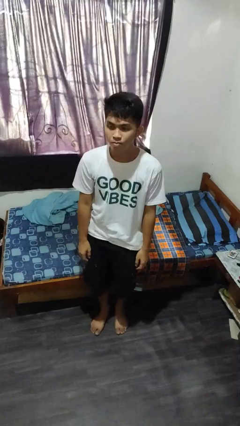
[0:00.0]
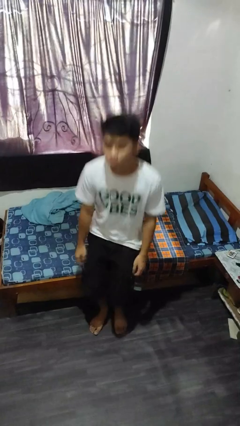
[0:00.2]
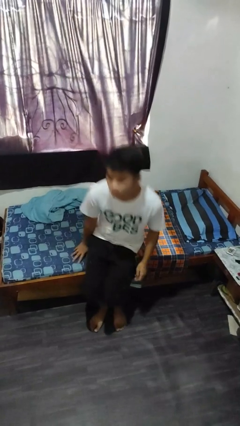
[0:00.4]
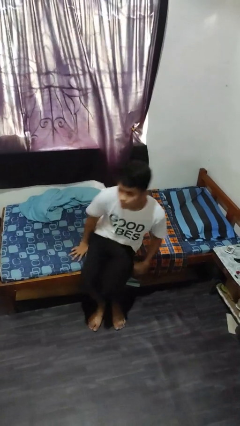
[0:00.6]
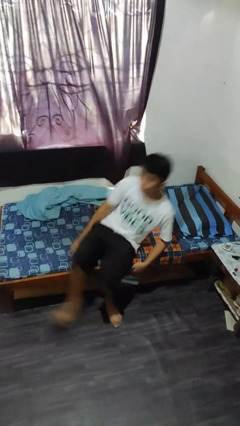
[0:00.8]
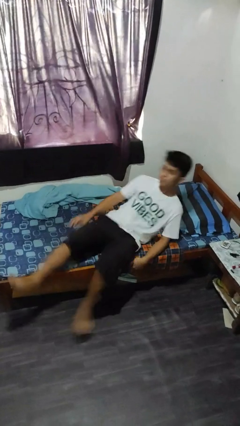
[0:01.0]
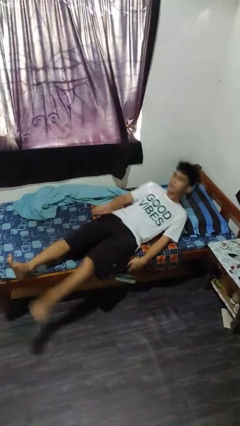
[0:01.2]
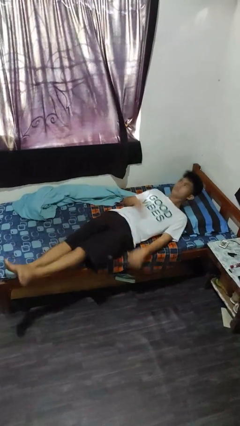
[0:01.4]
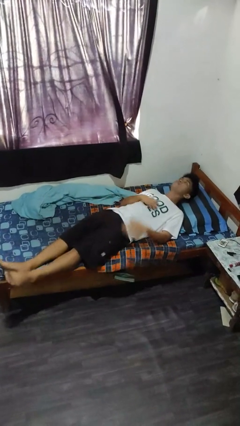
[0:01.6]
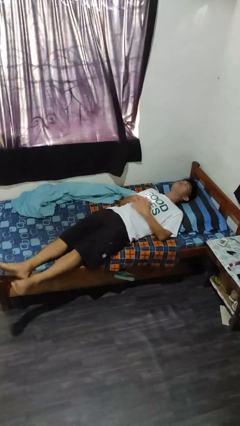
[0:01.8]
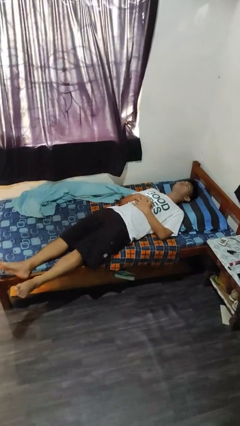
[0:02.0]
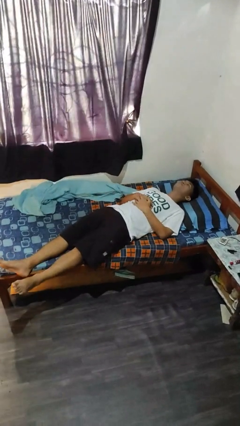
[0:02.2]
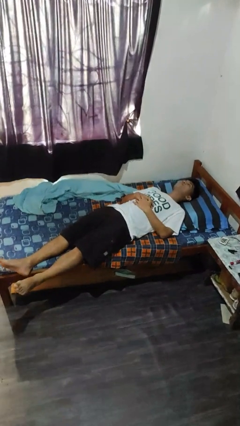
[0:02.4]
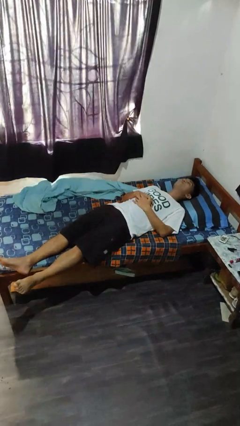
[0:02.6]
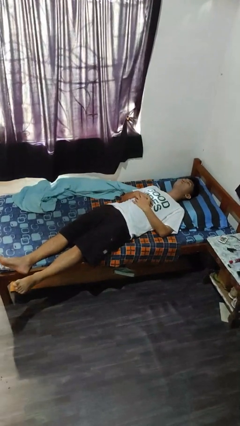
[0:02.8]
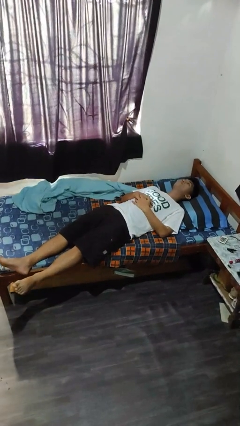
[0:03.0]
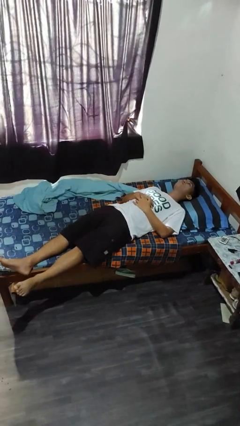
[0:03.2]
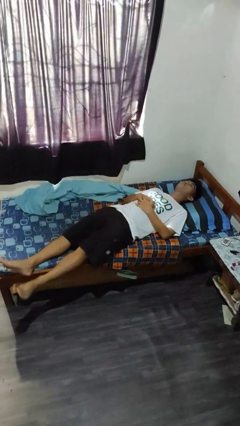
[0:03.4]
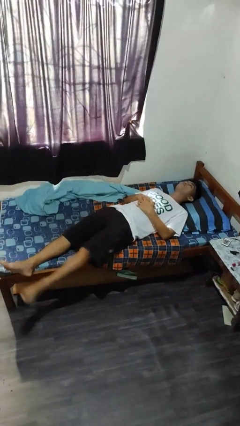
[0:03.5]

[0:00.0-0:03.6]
person lies down on bed

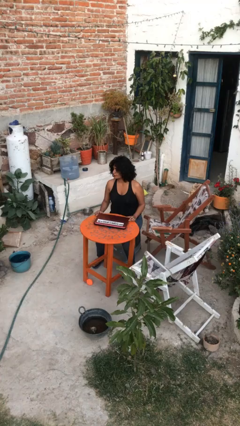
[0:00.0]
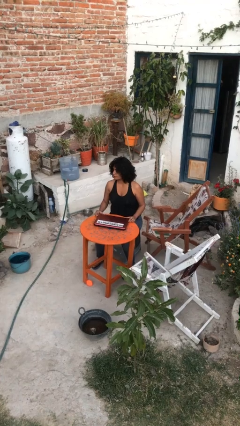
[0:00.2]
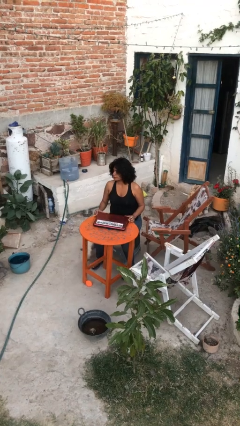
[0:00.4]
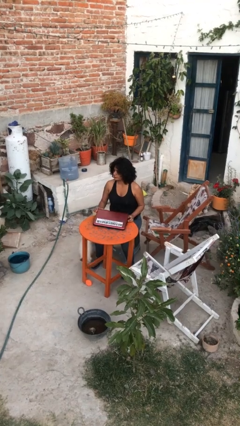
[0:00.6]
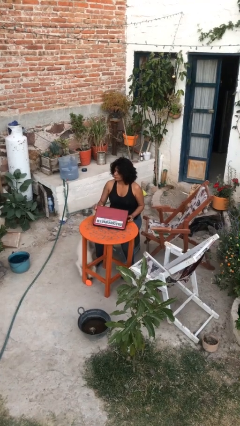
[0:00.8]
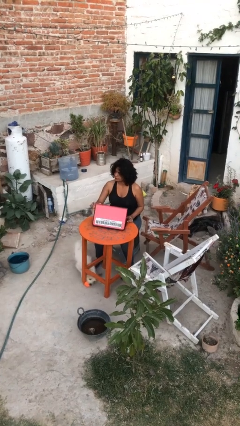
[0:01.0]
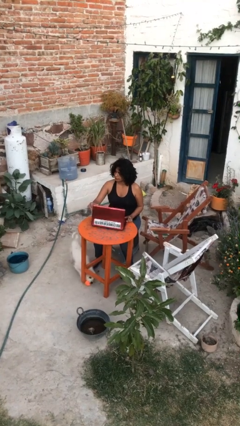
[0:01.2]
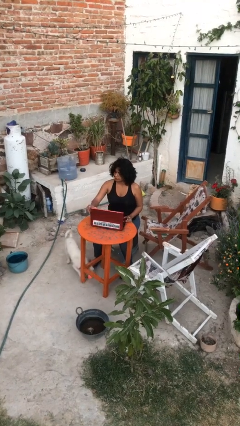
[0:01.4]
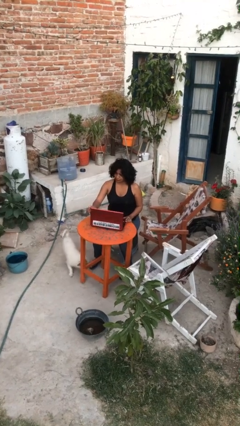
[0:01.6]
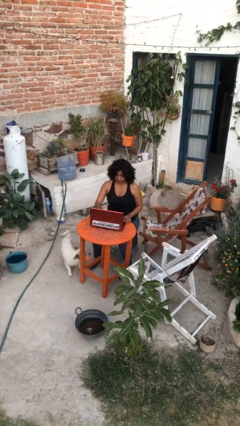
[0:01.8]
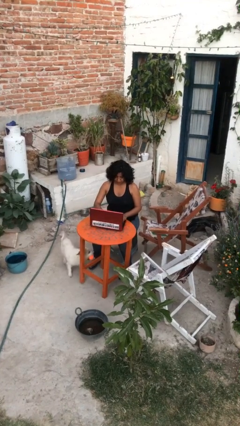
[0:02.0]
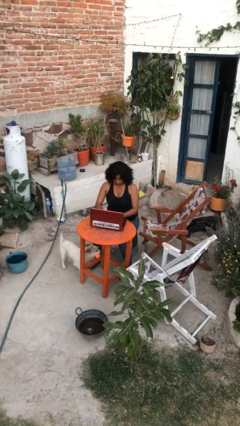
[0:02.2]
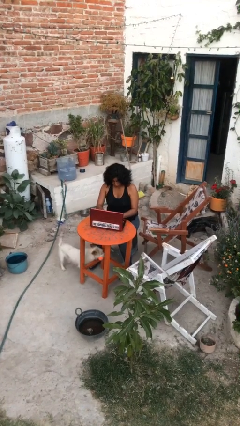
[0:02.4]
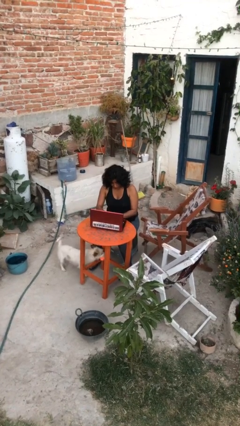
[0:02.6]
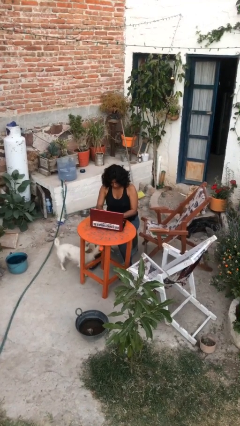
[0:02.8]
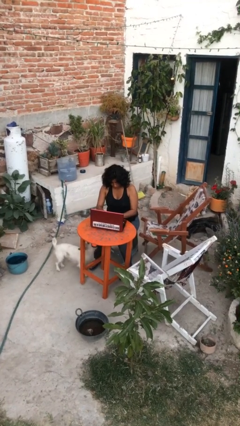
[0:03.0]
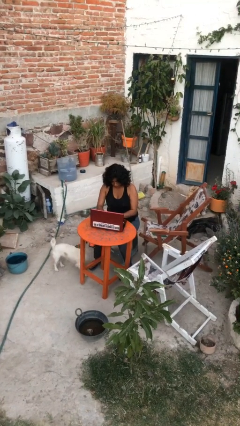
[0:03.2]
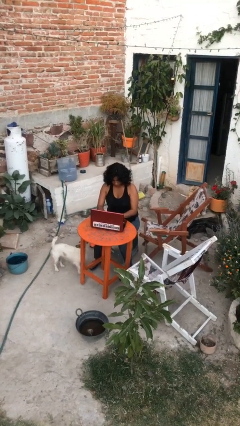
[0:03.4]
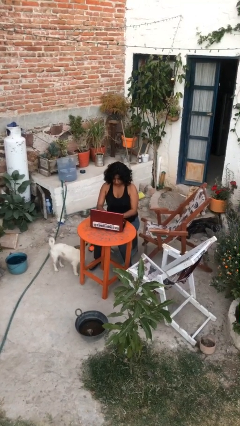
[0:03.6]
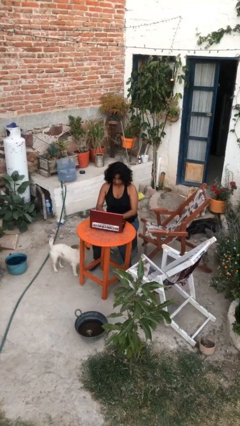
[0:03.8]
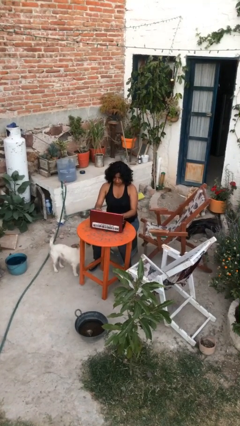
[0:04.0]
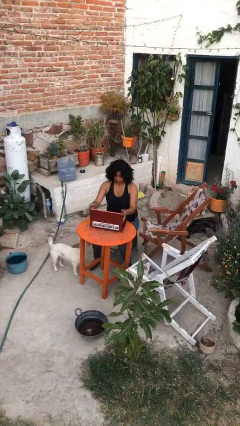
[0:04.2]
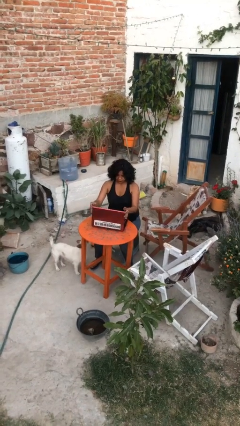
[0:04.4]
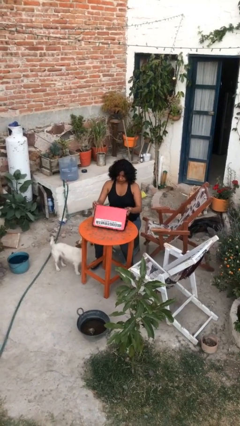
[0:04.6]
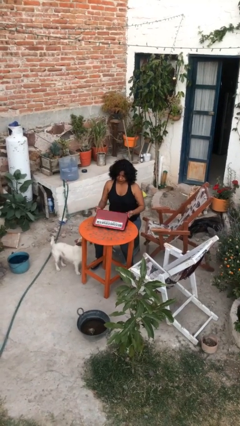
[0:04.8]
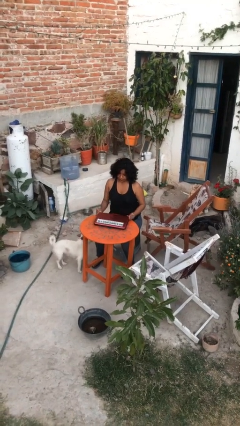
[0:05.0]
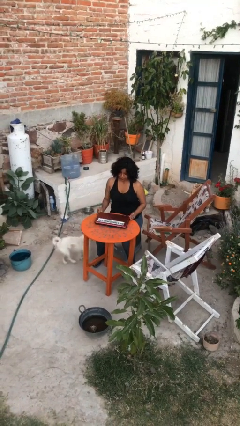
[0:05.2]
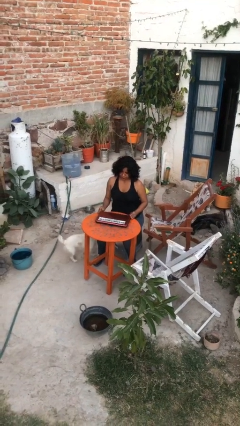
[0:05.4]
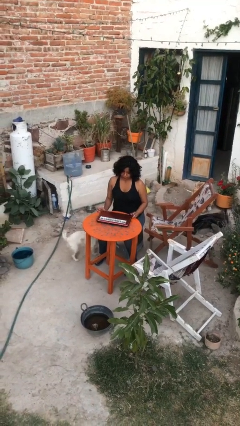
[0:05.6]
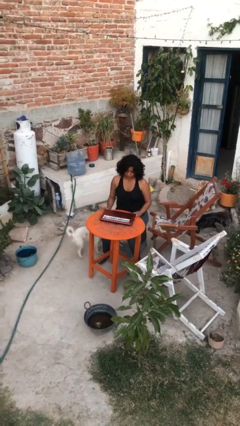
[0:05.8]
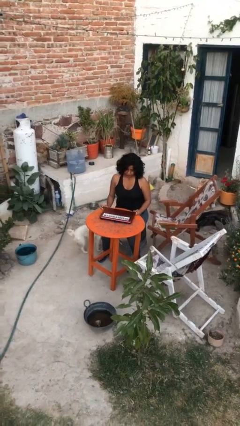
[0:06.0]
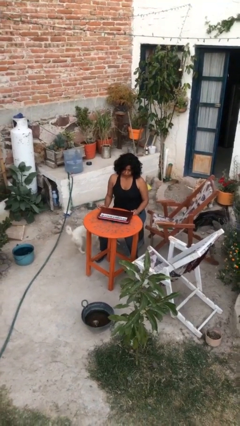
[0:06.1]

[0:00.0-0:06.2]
person interacts with laptop

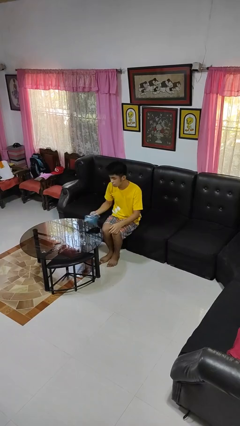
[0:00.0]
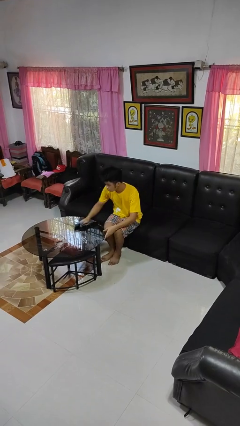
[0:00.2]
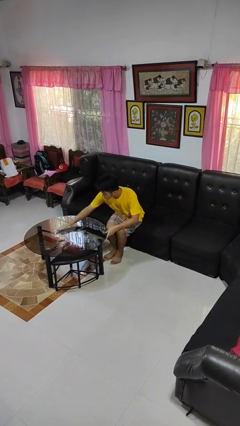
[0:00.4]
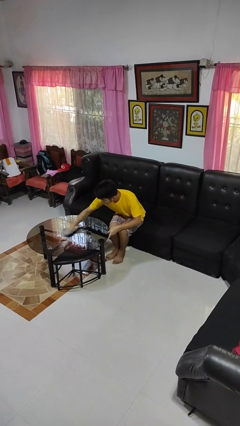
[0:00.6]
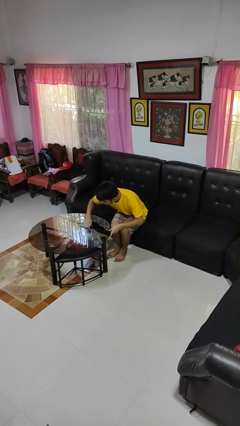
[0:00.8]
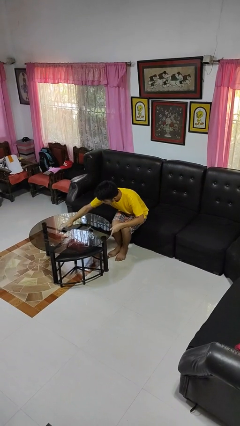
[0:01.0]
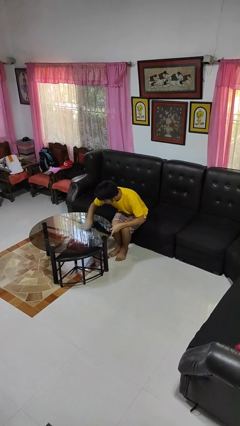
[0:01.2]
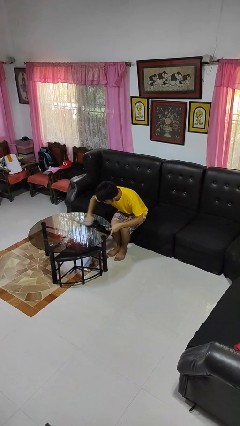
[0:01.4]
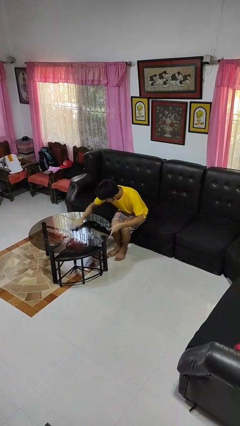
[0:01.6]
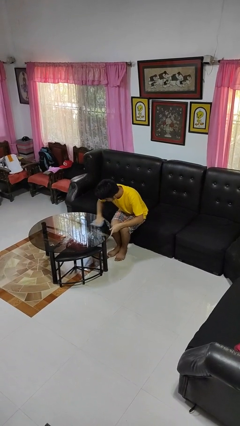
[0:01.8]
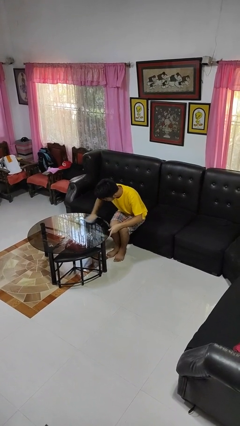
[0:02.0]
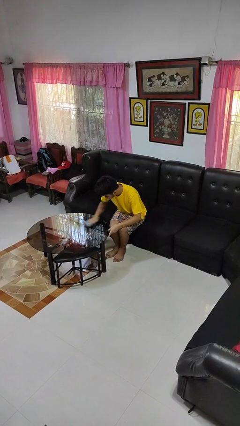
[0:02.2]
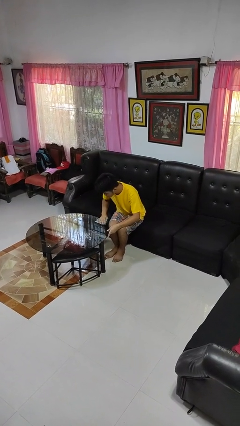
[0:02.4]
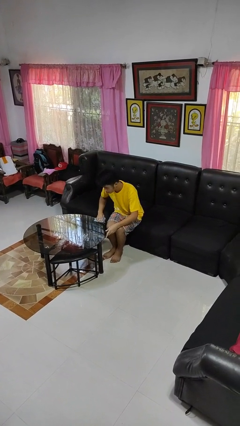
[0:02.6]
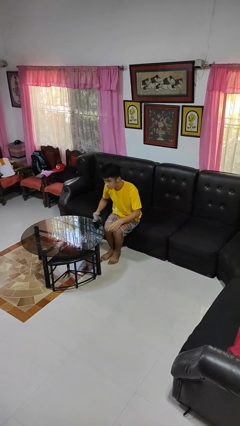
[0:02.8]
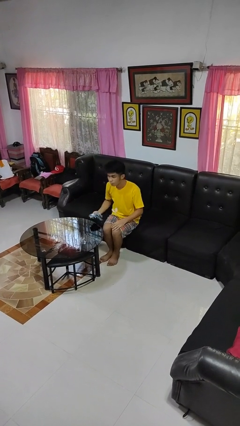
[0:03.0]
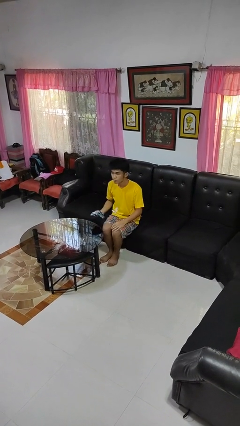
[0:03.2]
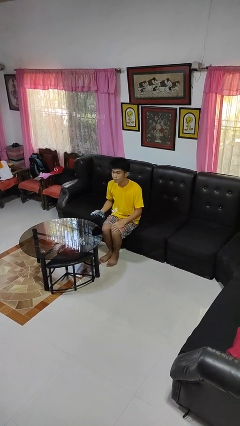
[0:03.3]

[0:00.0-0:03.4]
person cleans table with rag

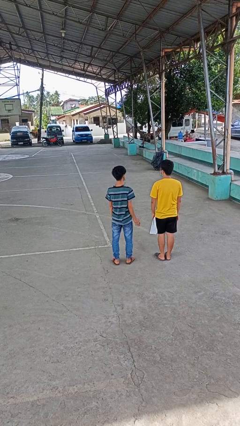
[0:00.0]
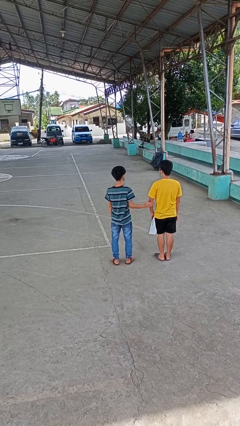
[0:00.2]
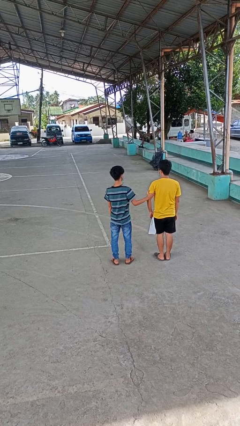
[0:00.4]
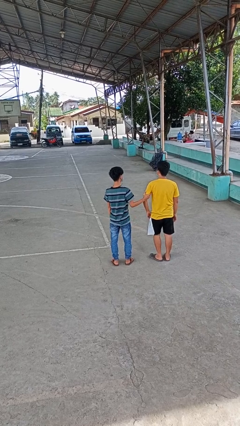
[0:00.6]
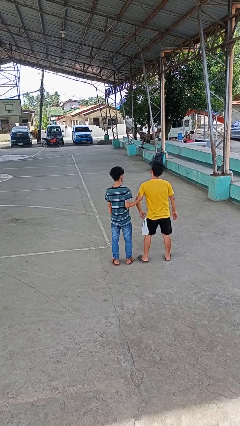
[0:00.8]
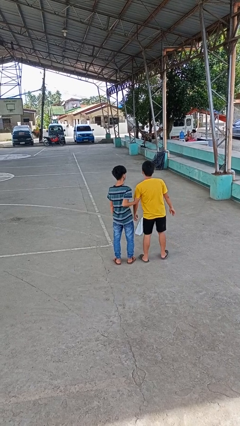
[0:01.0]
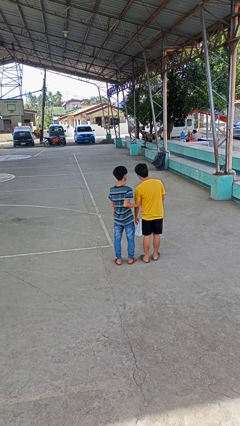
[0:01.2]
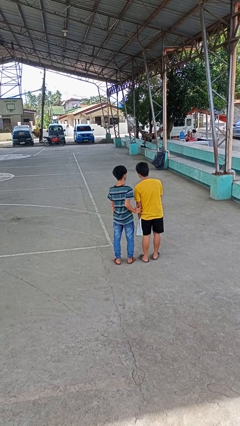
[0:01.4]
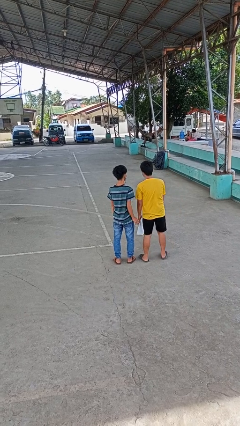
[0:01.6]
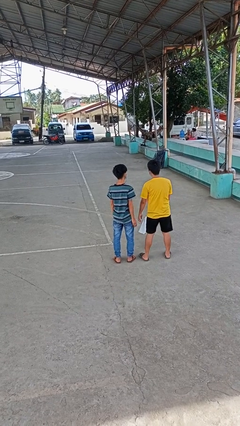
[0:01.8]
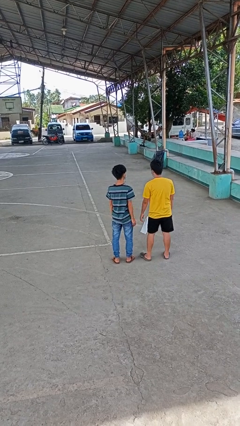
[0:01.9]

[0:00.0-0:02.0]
person grabs person by bicep

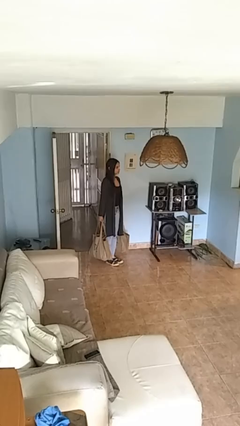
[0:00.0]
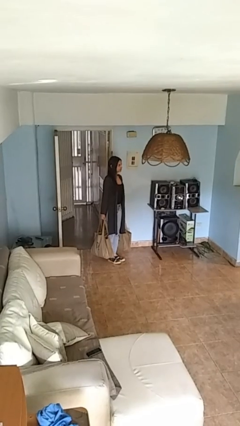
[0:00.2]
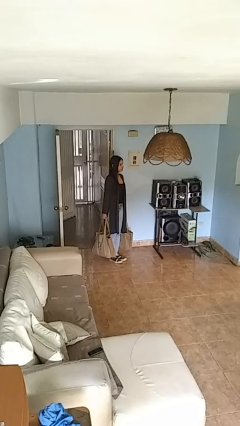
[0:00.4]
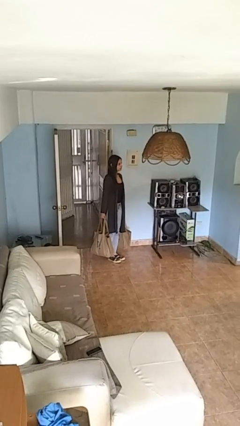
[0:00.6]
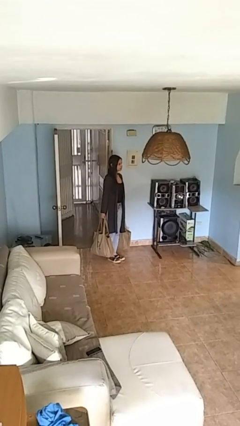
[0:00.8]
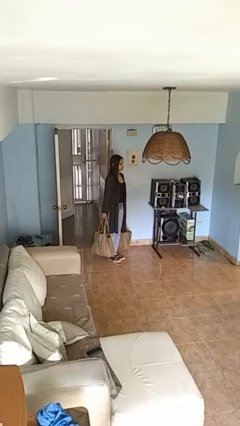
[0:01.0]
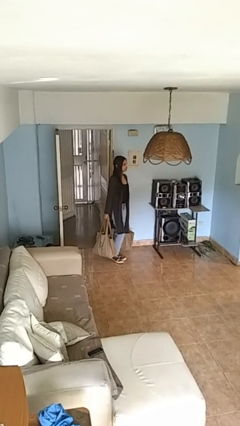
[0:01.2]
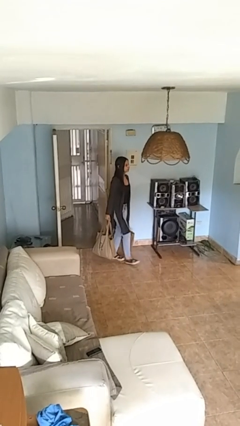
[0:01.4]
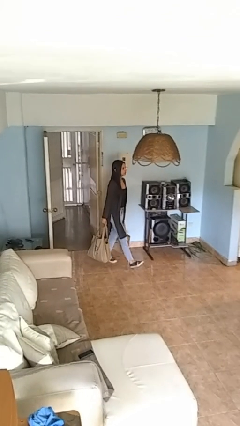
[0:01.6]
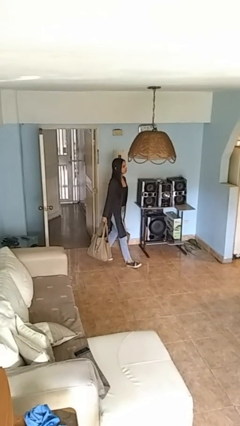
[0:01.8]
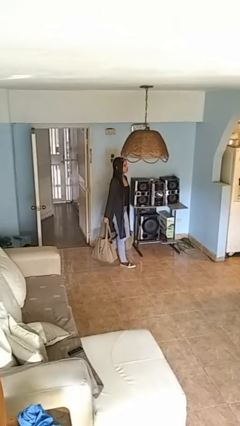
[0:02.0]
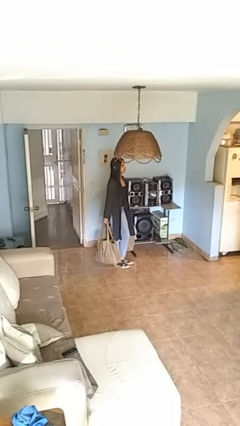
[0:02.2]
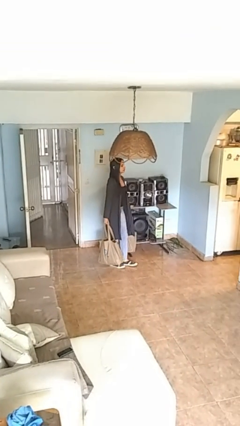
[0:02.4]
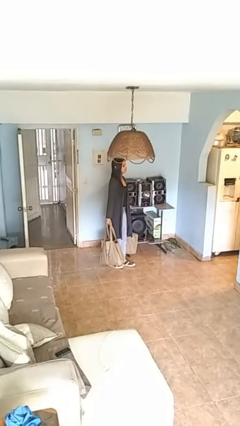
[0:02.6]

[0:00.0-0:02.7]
person carries groceries
